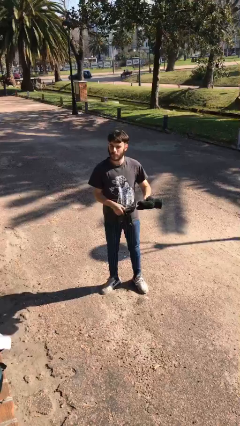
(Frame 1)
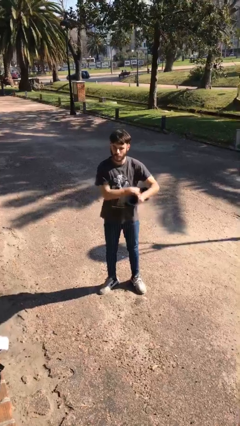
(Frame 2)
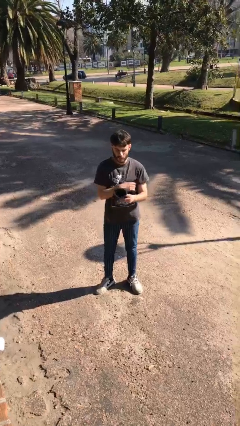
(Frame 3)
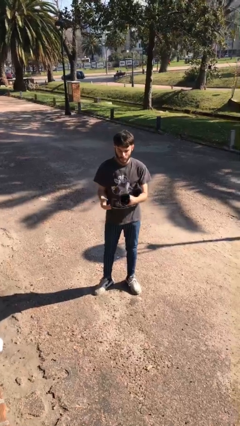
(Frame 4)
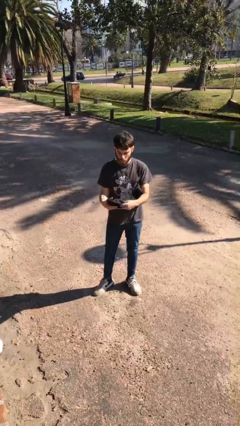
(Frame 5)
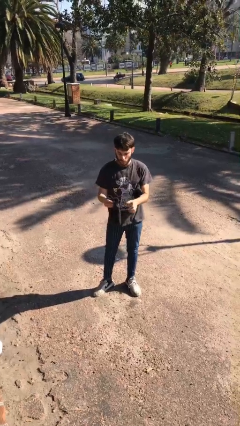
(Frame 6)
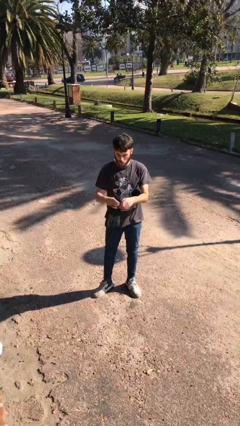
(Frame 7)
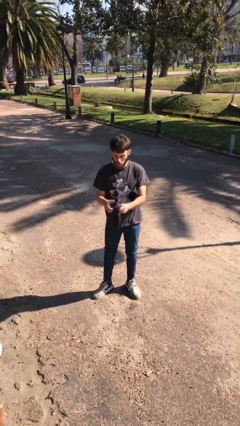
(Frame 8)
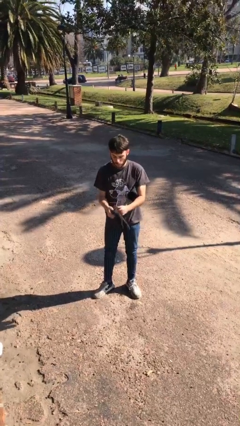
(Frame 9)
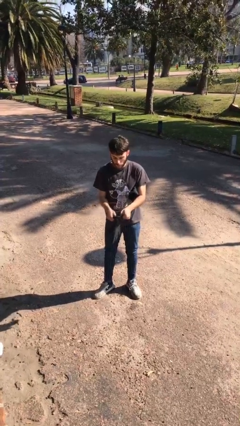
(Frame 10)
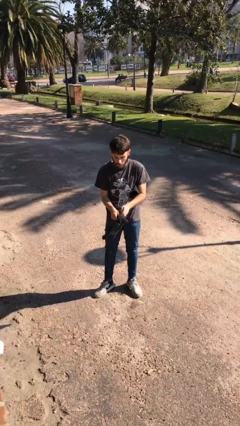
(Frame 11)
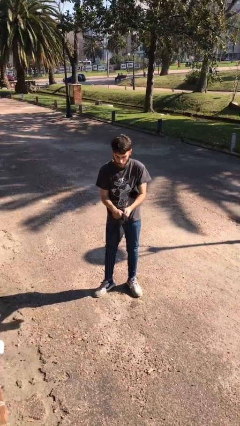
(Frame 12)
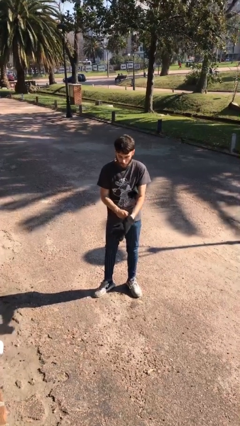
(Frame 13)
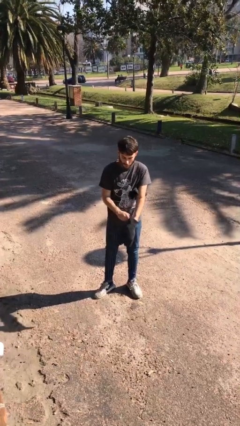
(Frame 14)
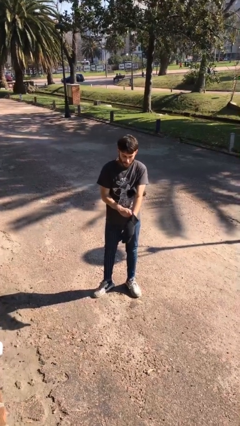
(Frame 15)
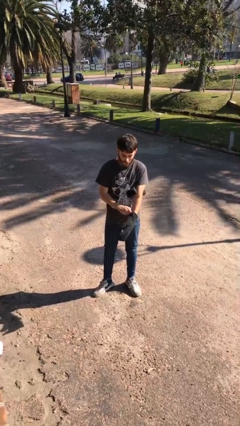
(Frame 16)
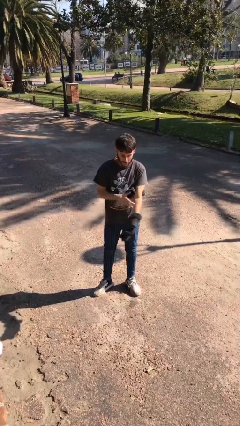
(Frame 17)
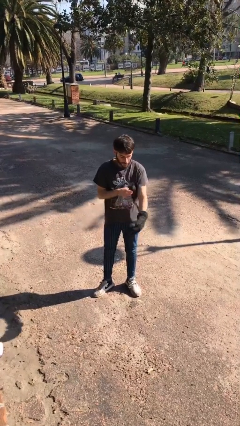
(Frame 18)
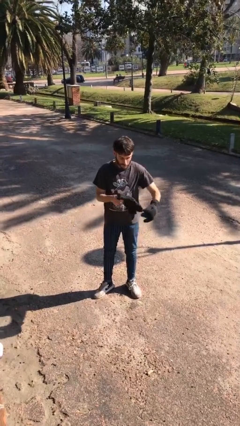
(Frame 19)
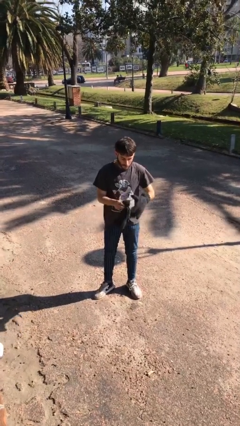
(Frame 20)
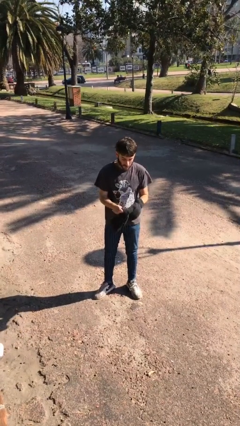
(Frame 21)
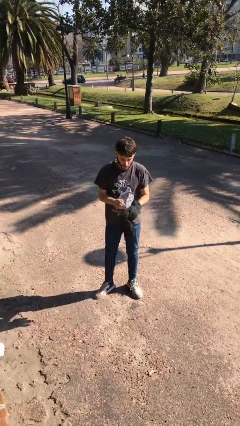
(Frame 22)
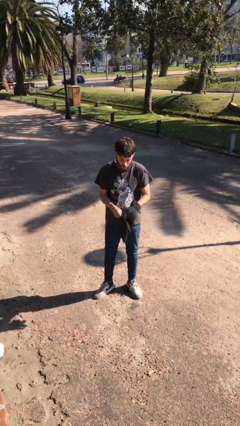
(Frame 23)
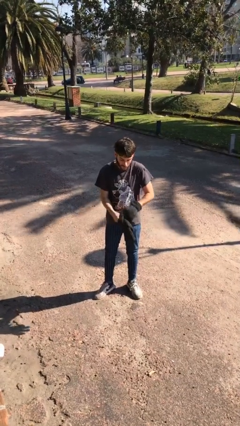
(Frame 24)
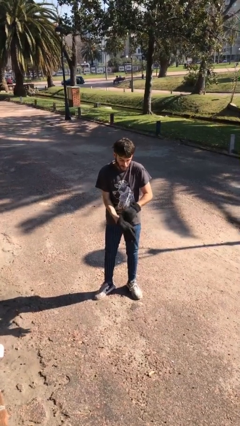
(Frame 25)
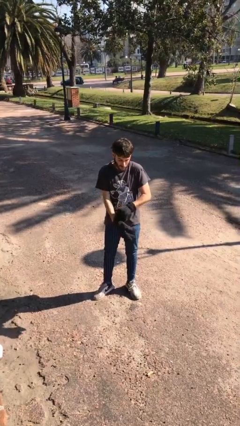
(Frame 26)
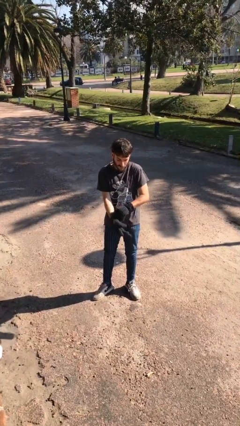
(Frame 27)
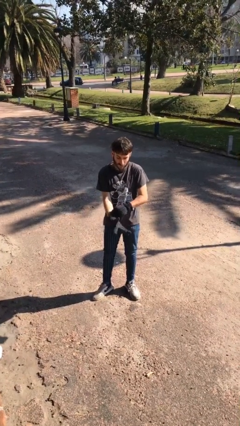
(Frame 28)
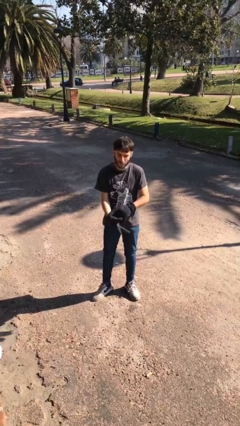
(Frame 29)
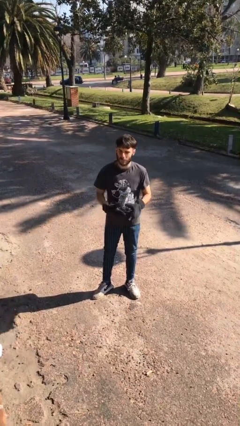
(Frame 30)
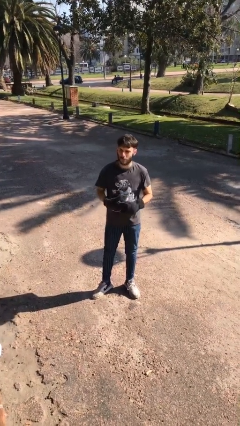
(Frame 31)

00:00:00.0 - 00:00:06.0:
person puts on gloves

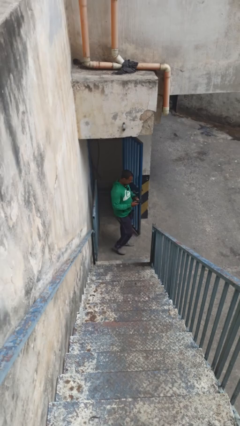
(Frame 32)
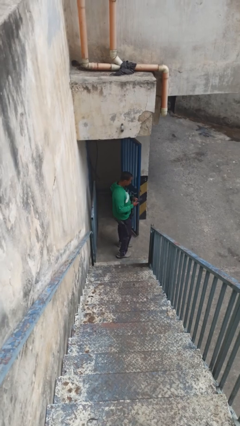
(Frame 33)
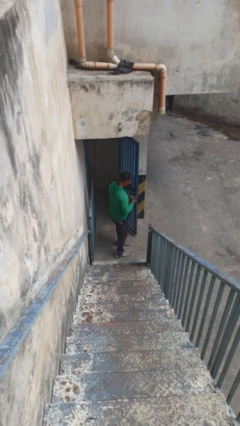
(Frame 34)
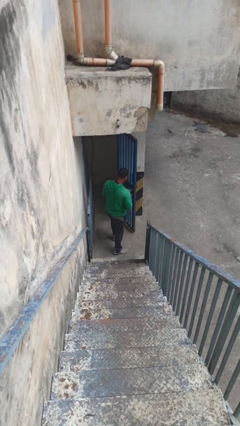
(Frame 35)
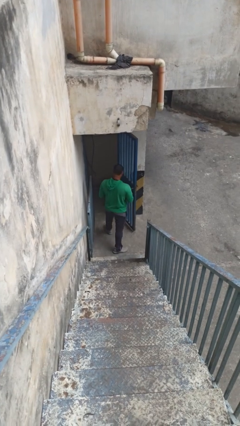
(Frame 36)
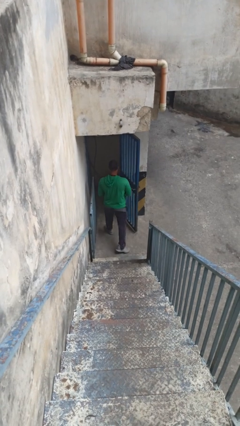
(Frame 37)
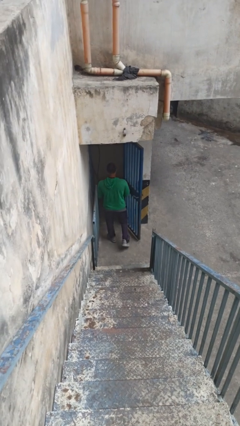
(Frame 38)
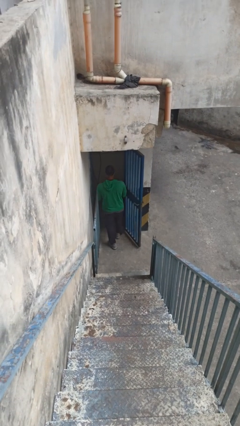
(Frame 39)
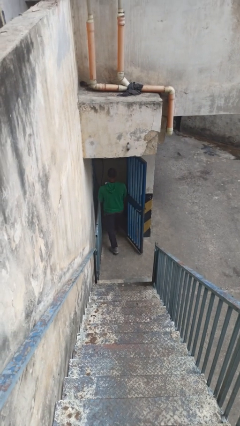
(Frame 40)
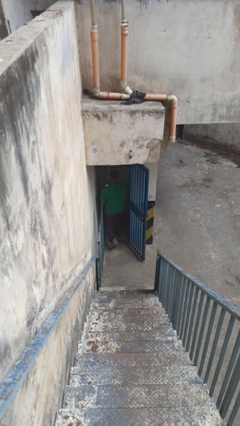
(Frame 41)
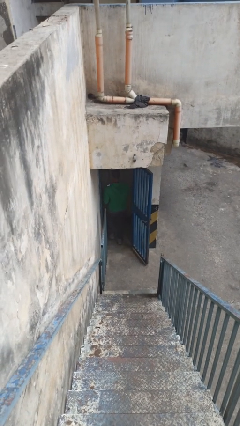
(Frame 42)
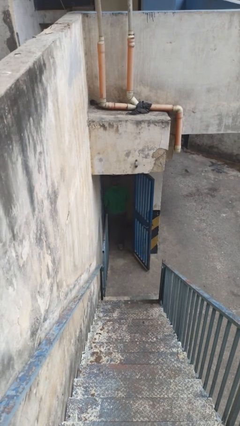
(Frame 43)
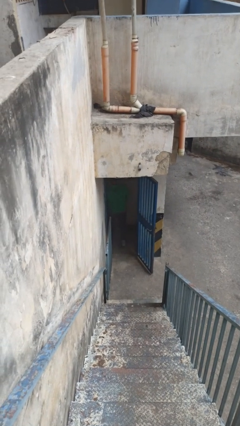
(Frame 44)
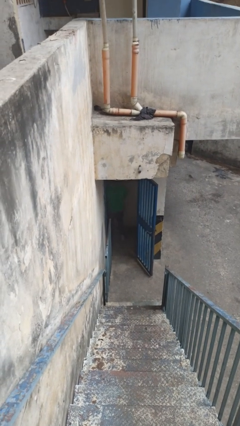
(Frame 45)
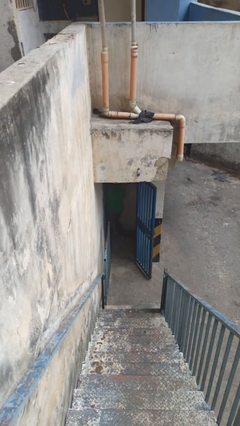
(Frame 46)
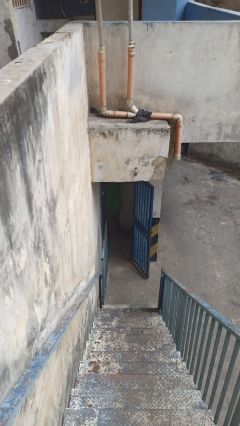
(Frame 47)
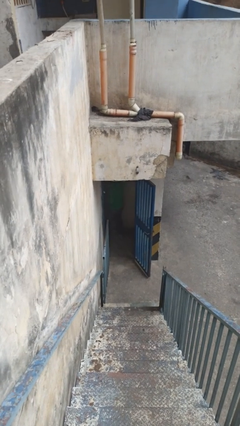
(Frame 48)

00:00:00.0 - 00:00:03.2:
person exits scene through structure

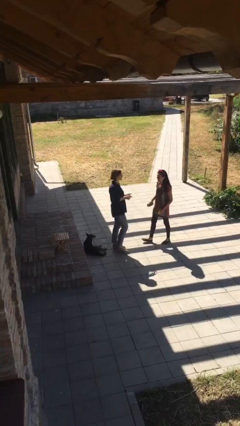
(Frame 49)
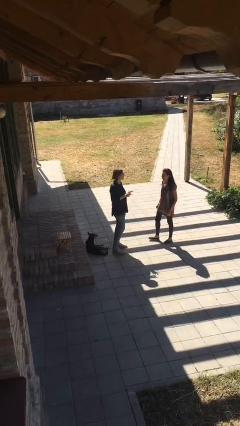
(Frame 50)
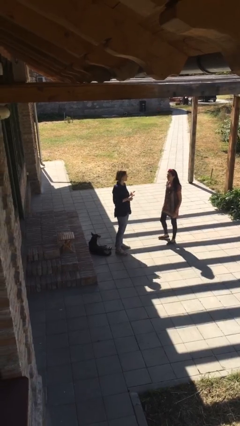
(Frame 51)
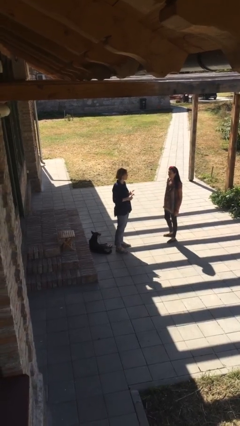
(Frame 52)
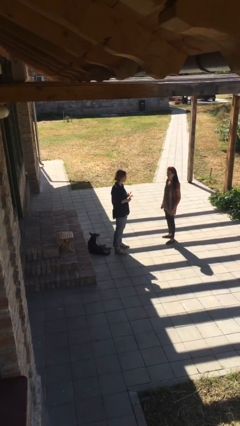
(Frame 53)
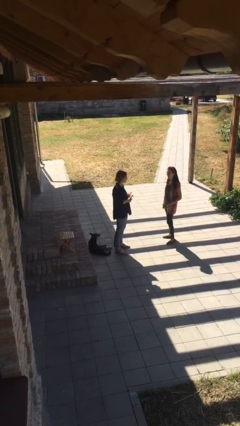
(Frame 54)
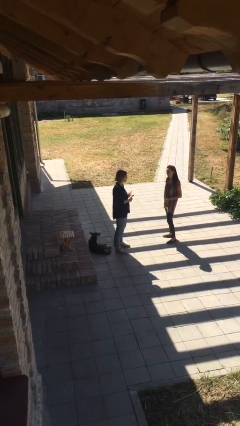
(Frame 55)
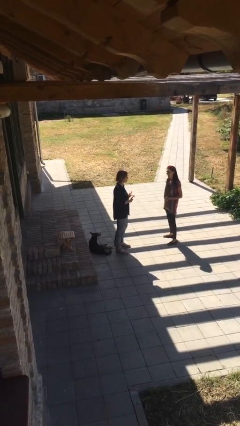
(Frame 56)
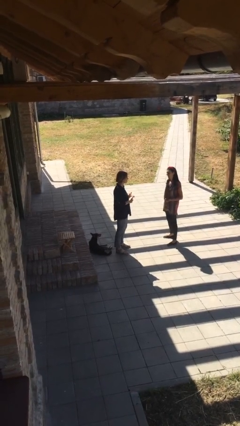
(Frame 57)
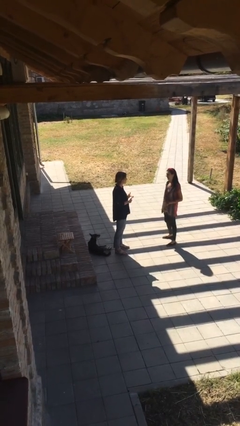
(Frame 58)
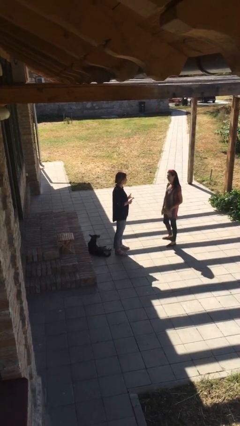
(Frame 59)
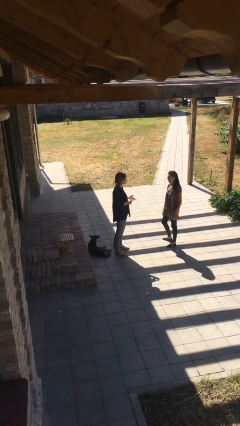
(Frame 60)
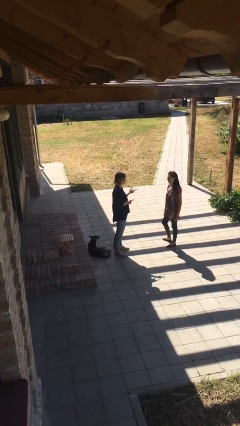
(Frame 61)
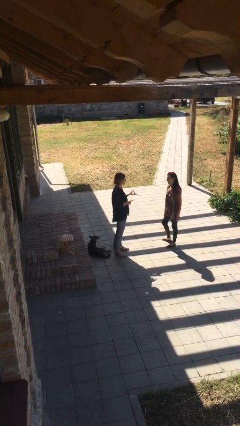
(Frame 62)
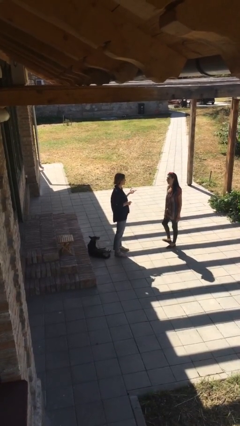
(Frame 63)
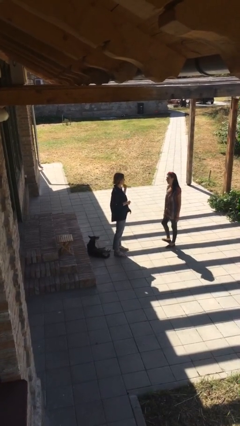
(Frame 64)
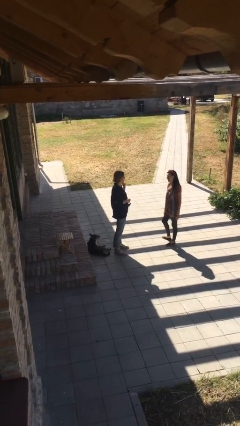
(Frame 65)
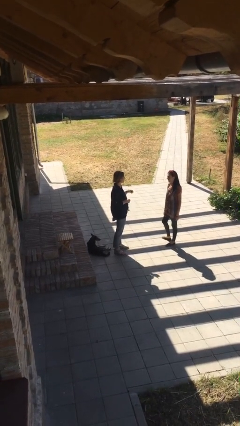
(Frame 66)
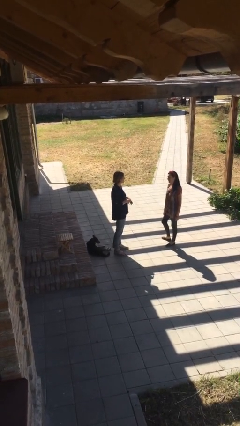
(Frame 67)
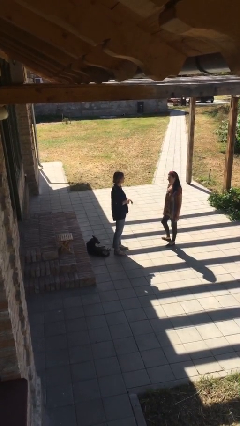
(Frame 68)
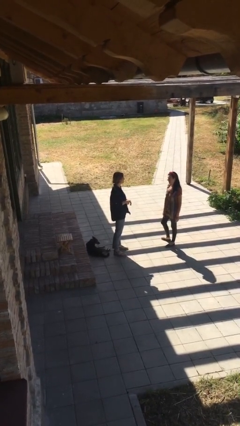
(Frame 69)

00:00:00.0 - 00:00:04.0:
person talks to person

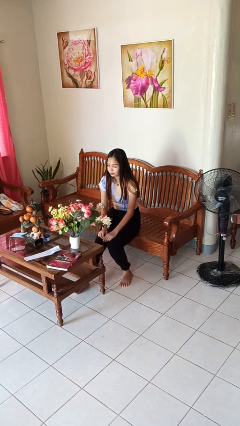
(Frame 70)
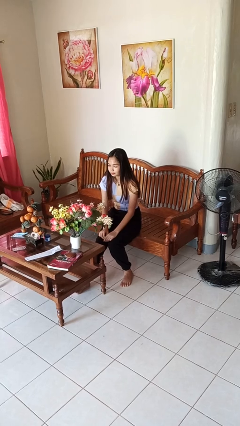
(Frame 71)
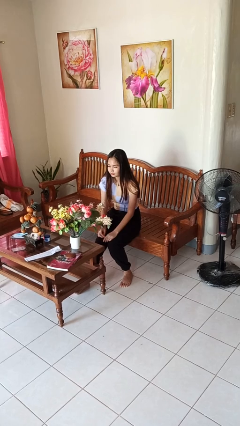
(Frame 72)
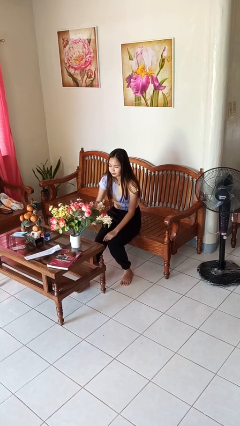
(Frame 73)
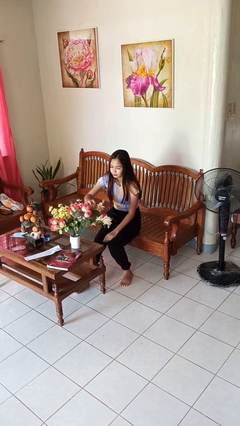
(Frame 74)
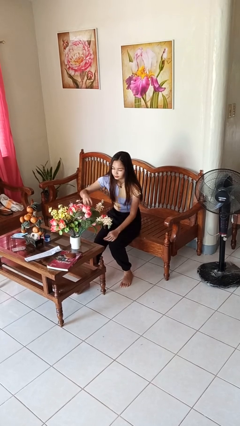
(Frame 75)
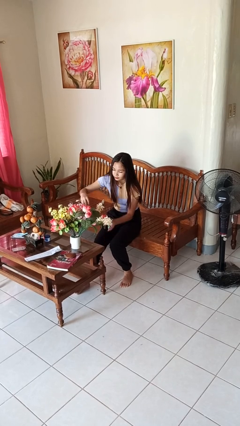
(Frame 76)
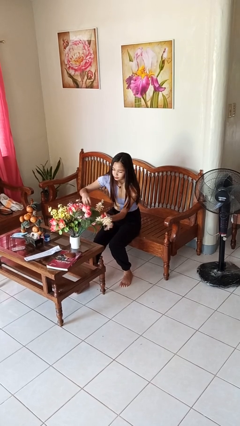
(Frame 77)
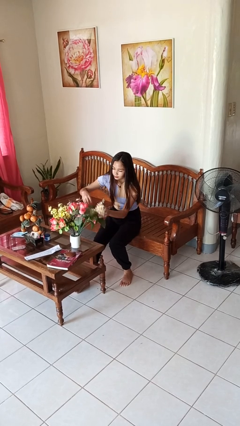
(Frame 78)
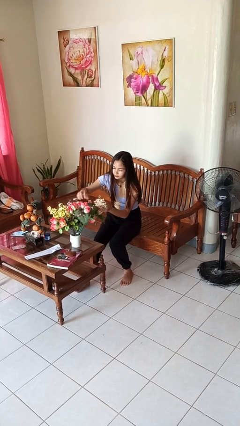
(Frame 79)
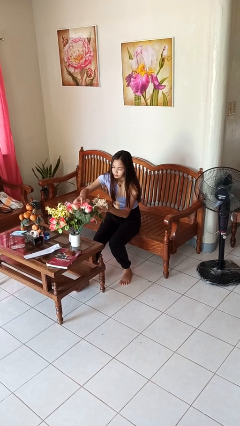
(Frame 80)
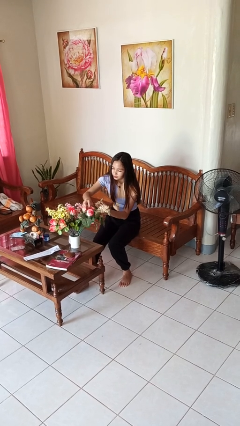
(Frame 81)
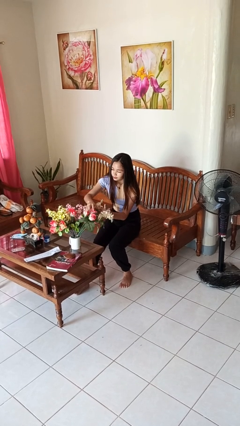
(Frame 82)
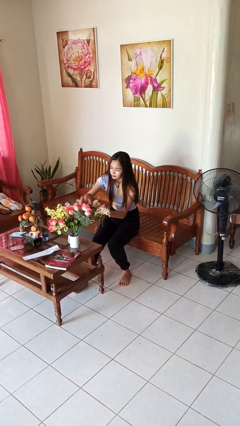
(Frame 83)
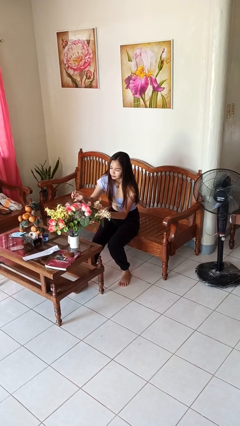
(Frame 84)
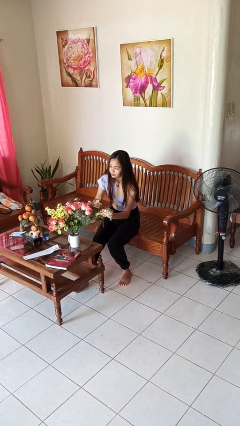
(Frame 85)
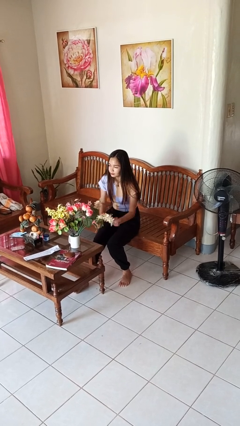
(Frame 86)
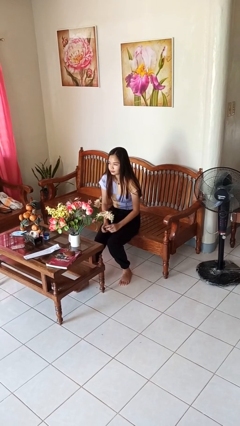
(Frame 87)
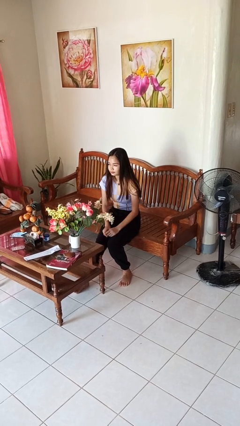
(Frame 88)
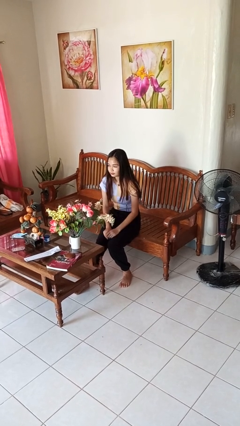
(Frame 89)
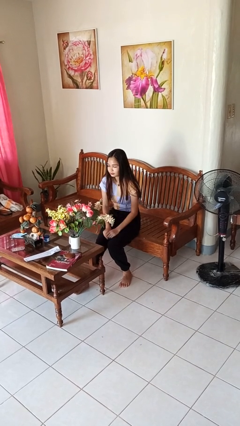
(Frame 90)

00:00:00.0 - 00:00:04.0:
person arranges flowers in vase

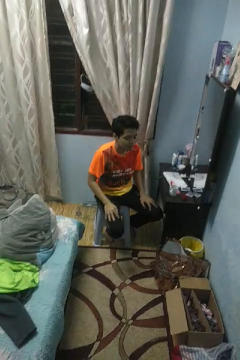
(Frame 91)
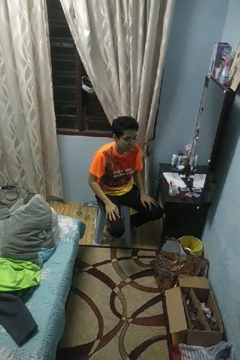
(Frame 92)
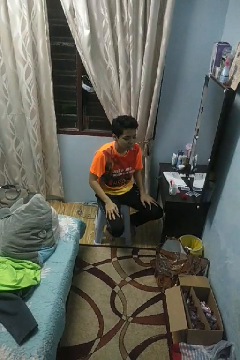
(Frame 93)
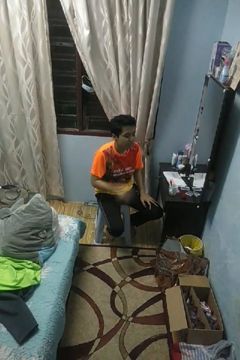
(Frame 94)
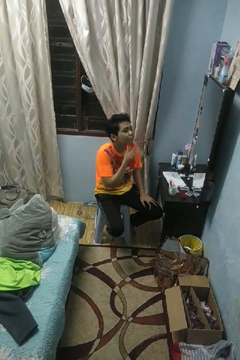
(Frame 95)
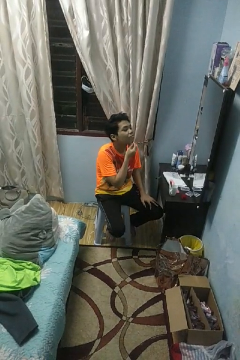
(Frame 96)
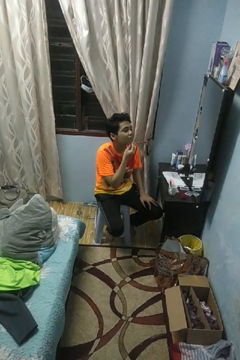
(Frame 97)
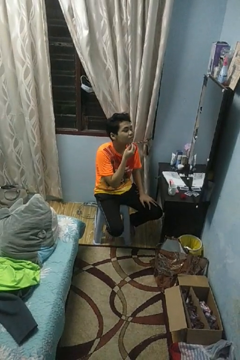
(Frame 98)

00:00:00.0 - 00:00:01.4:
person strokes chin
